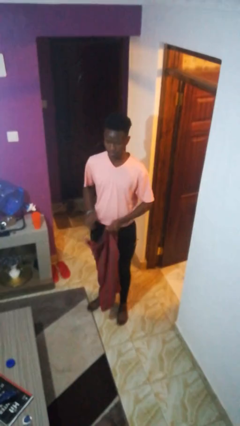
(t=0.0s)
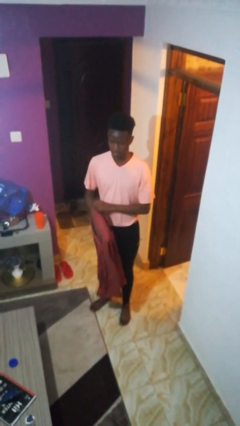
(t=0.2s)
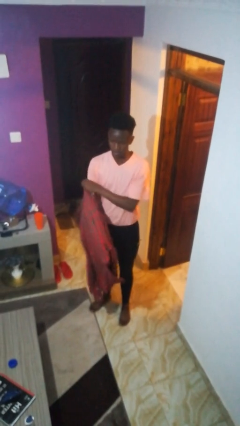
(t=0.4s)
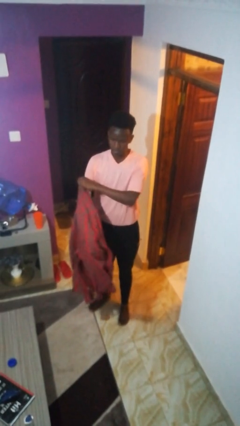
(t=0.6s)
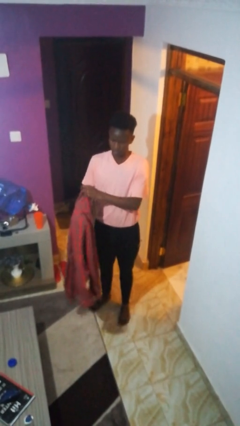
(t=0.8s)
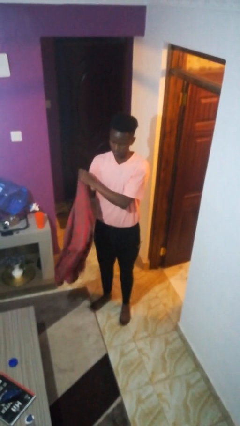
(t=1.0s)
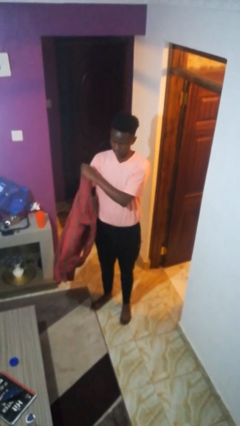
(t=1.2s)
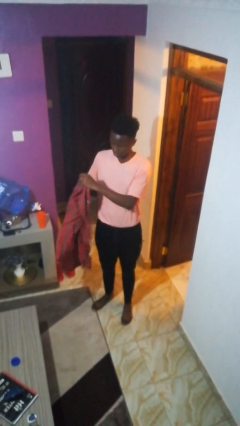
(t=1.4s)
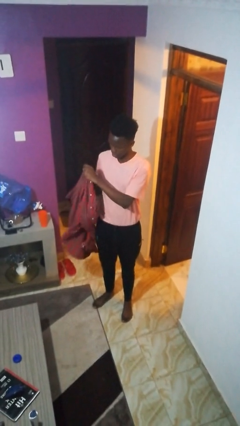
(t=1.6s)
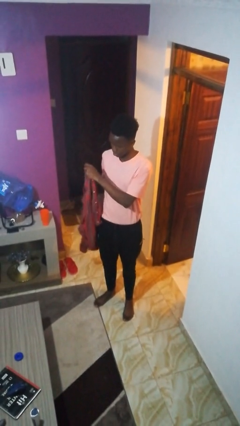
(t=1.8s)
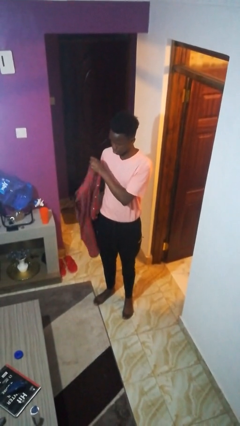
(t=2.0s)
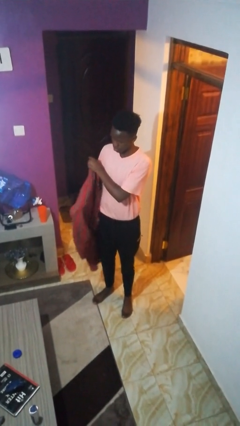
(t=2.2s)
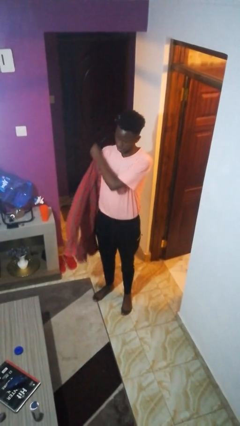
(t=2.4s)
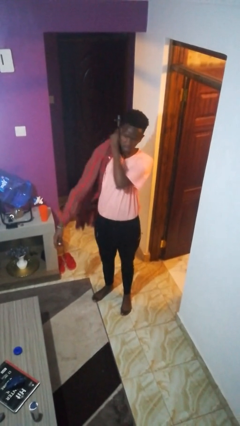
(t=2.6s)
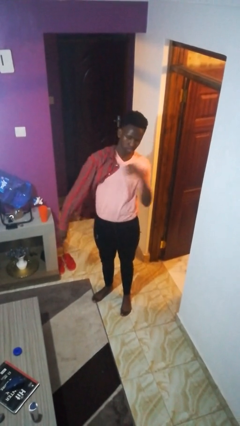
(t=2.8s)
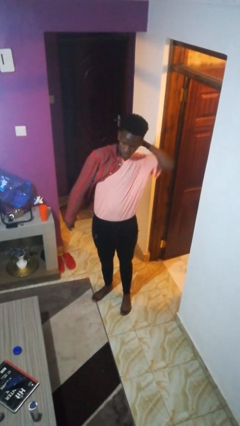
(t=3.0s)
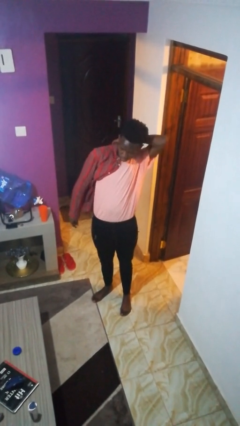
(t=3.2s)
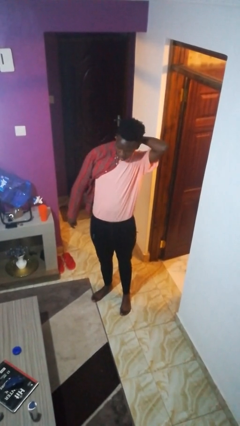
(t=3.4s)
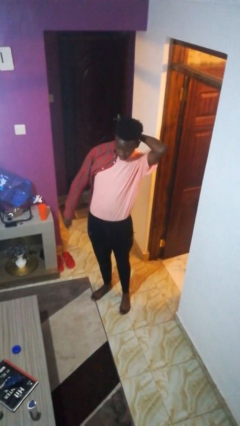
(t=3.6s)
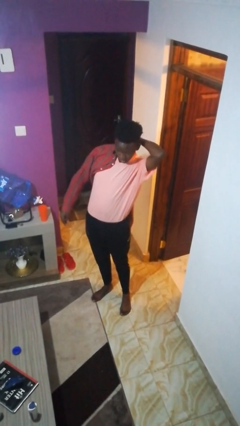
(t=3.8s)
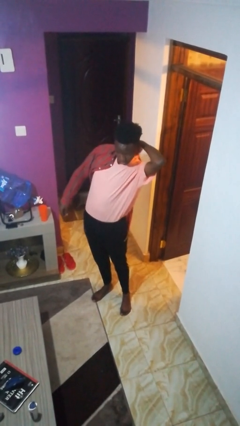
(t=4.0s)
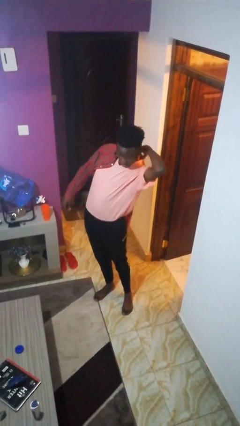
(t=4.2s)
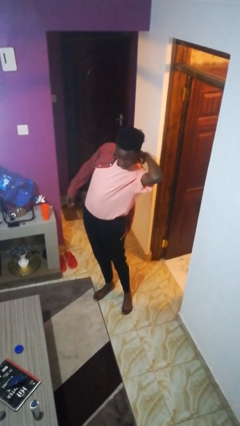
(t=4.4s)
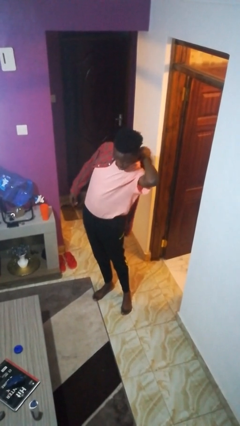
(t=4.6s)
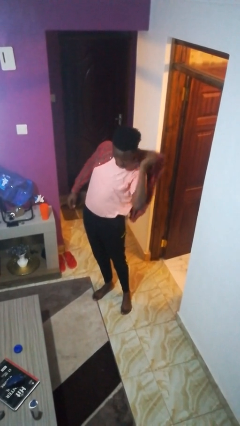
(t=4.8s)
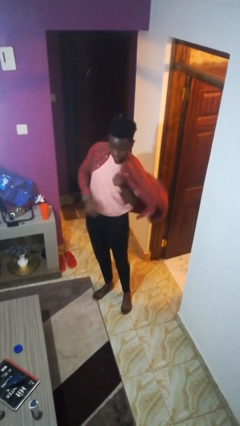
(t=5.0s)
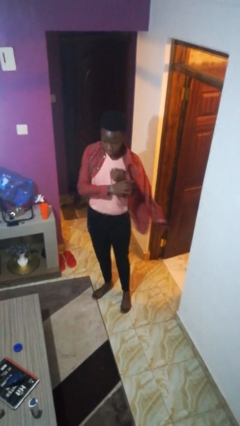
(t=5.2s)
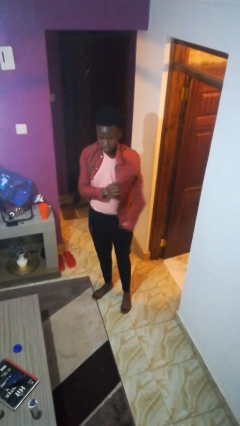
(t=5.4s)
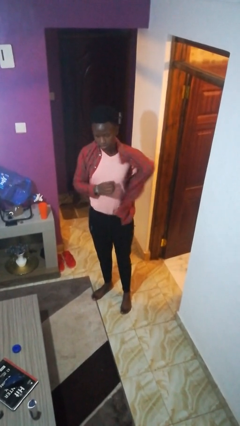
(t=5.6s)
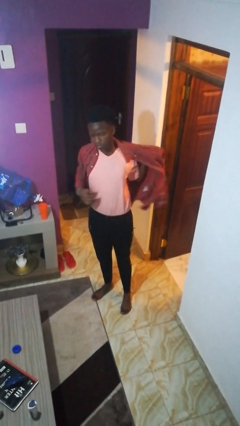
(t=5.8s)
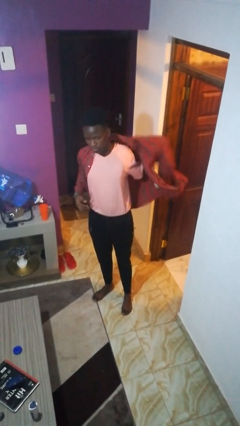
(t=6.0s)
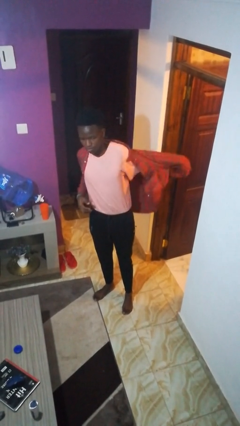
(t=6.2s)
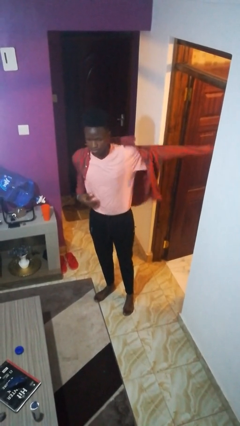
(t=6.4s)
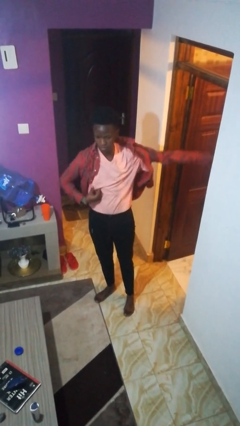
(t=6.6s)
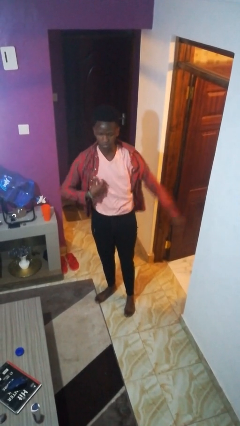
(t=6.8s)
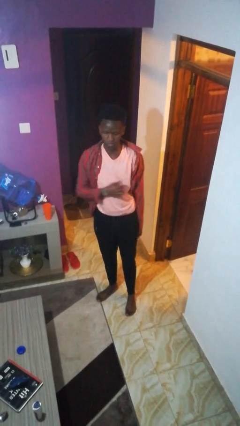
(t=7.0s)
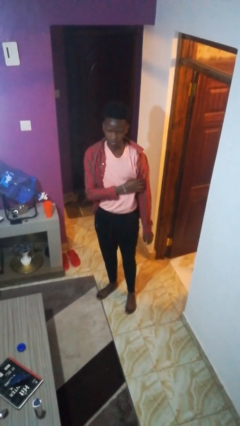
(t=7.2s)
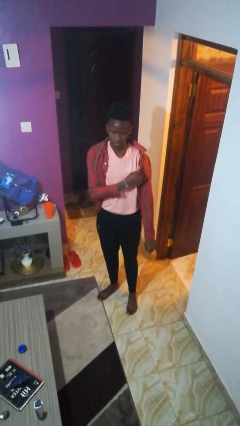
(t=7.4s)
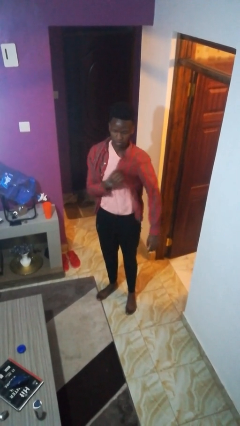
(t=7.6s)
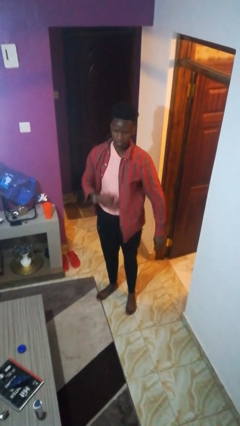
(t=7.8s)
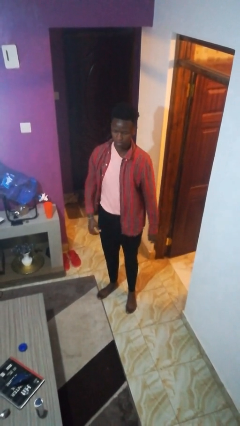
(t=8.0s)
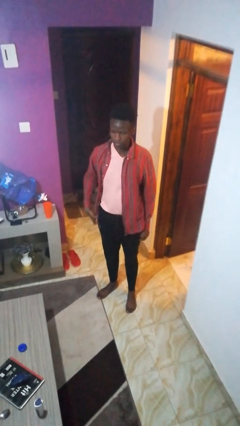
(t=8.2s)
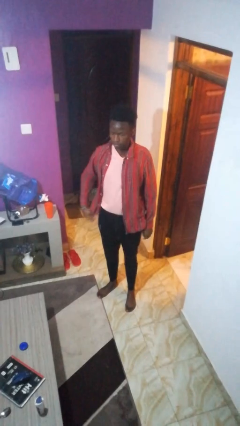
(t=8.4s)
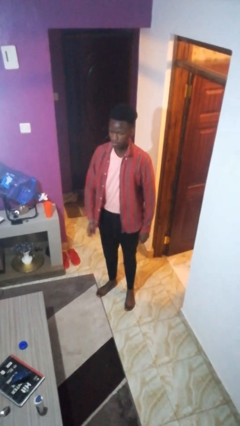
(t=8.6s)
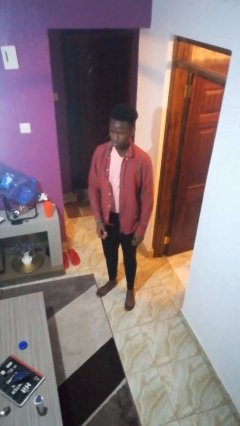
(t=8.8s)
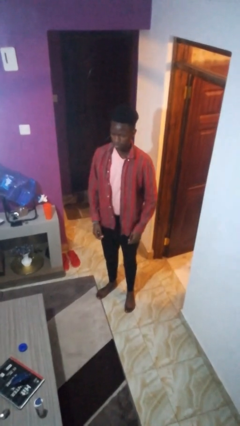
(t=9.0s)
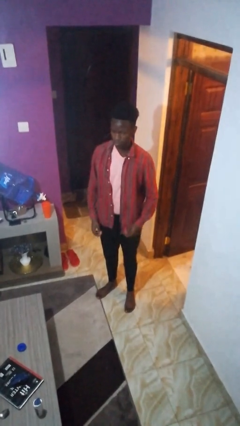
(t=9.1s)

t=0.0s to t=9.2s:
person puts on shirt

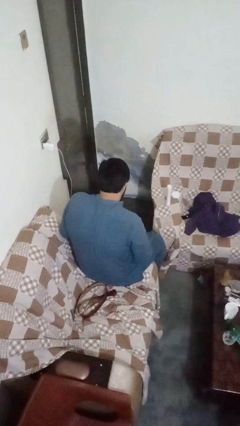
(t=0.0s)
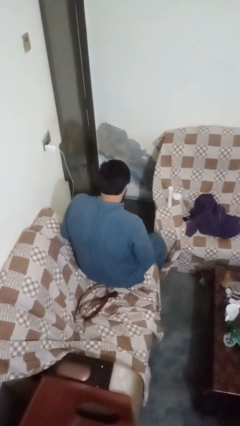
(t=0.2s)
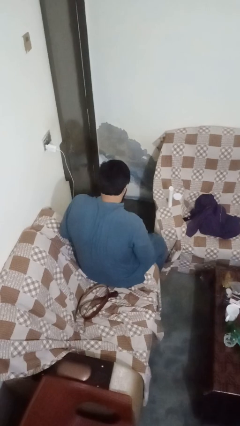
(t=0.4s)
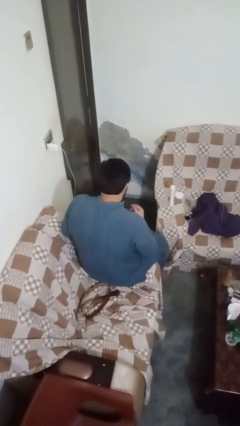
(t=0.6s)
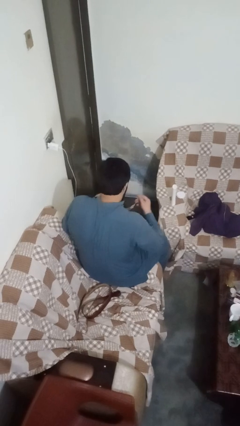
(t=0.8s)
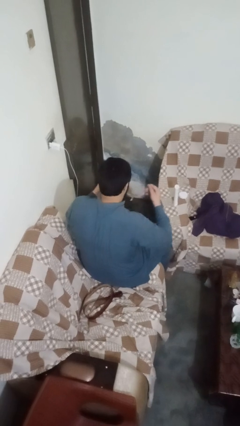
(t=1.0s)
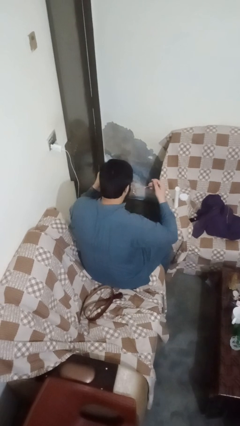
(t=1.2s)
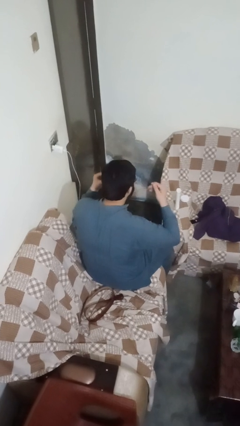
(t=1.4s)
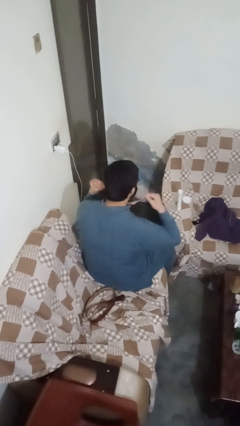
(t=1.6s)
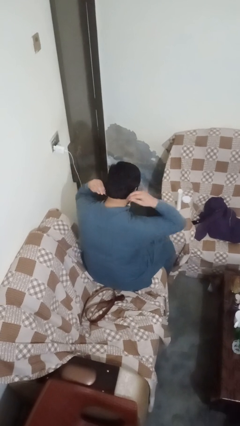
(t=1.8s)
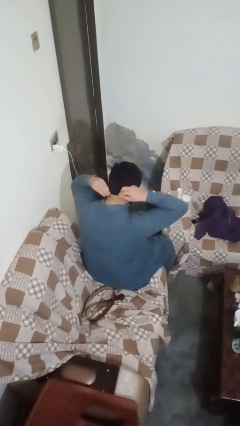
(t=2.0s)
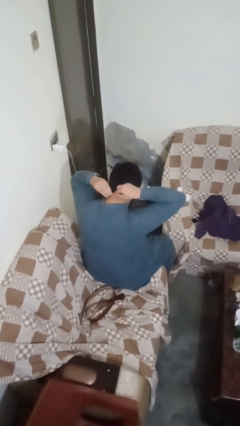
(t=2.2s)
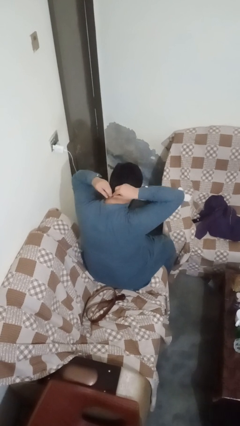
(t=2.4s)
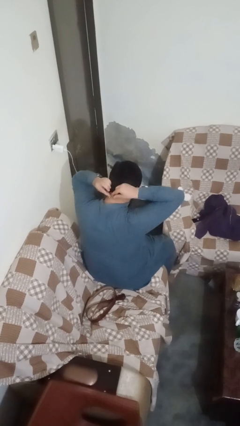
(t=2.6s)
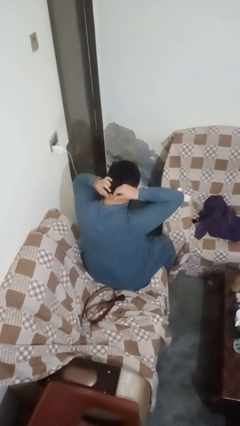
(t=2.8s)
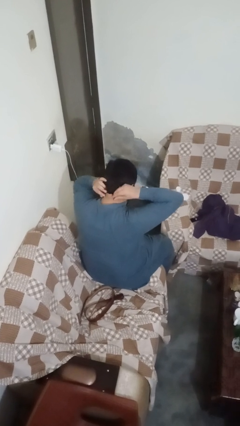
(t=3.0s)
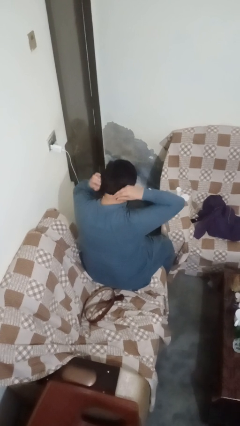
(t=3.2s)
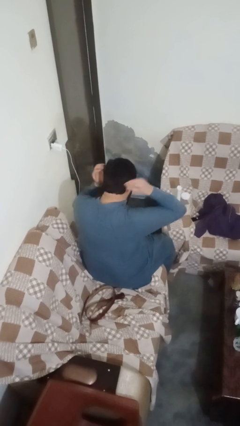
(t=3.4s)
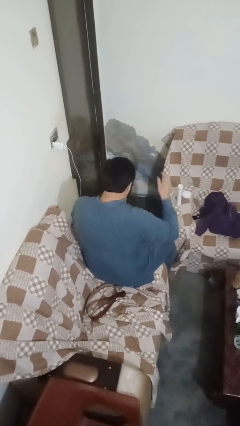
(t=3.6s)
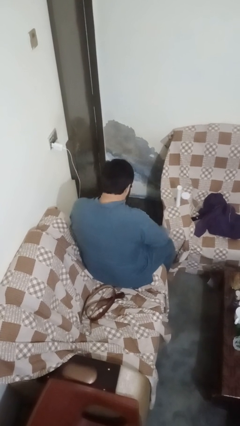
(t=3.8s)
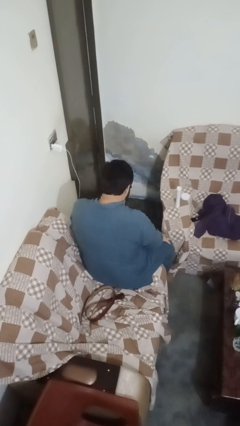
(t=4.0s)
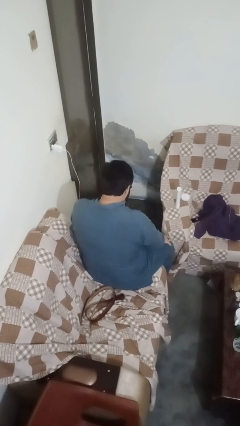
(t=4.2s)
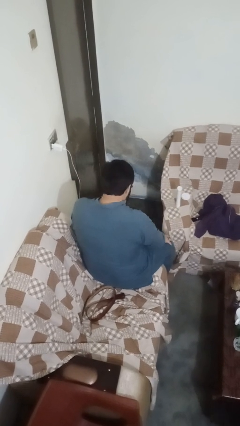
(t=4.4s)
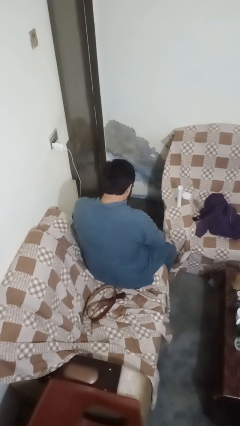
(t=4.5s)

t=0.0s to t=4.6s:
person puts on necklace

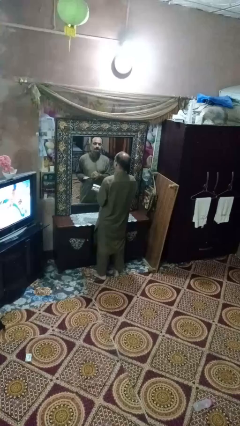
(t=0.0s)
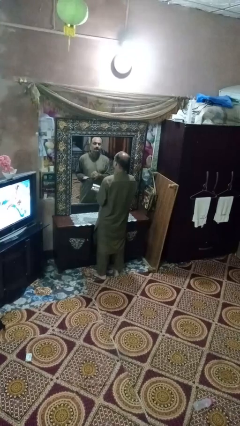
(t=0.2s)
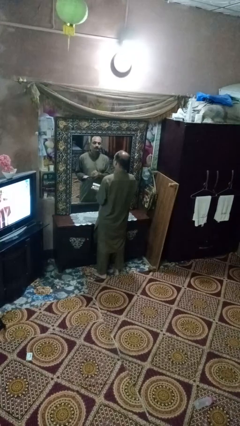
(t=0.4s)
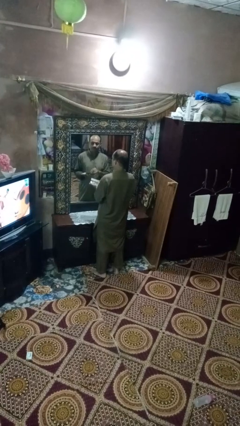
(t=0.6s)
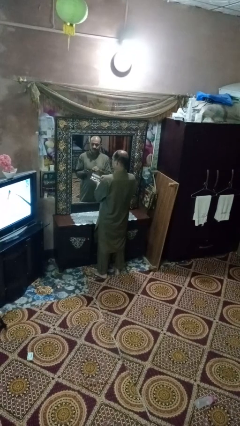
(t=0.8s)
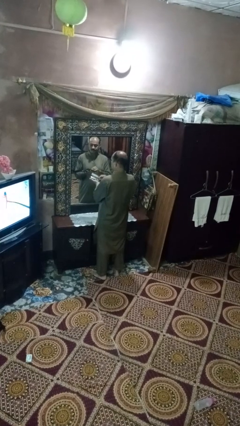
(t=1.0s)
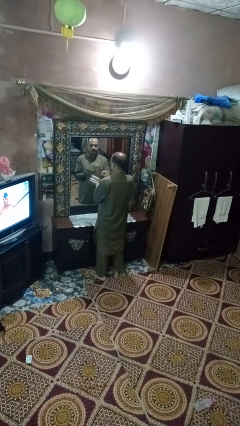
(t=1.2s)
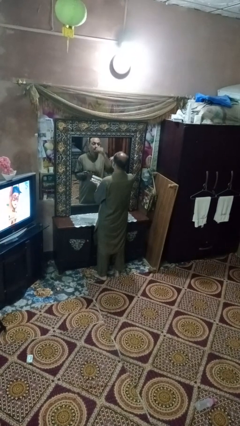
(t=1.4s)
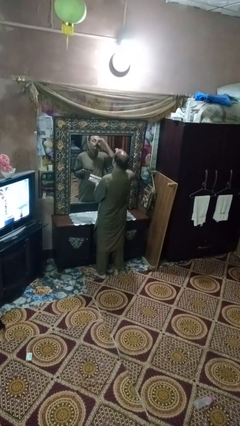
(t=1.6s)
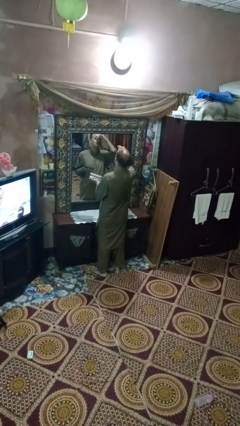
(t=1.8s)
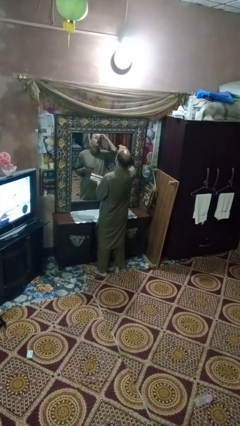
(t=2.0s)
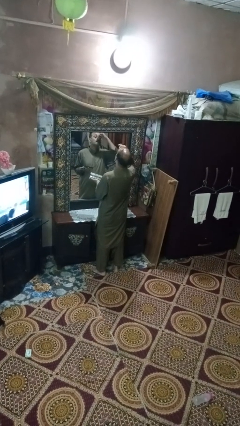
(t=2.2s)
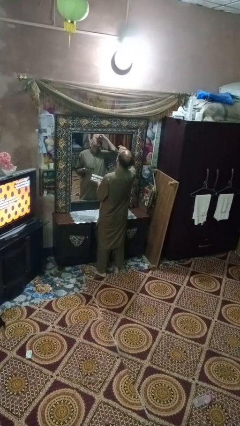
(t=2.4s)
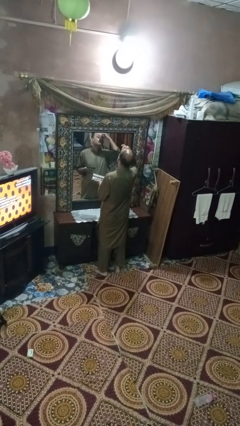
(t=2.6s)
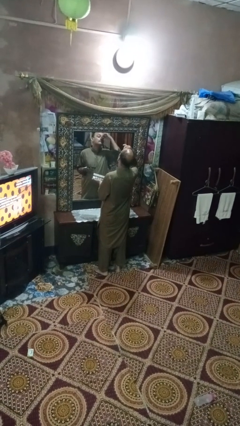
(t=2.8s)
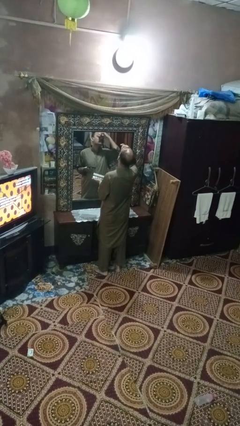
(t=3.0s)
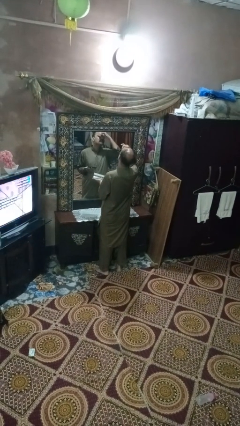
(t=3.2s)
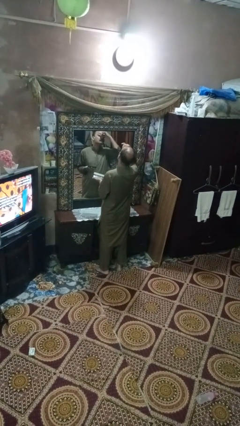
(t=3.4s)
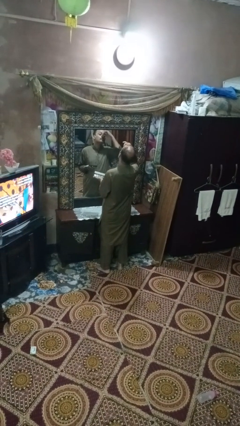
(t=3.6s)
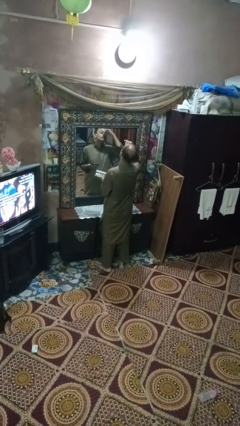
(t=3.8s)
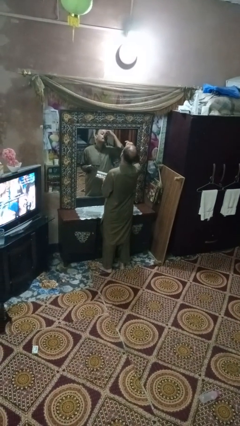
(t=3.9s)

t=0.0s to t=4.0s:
person applies eye makeup
